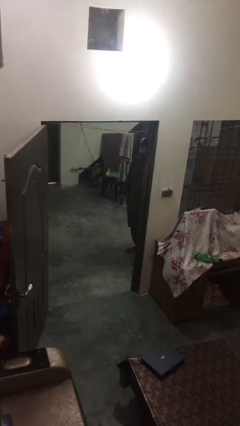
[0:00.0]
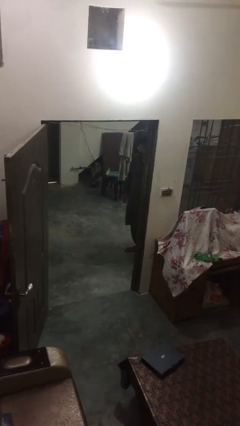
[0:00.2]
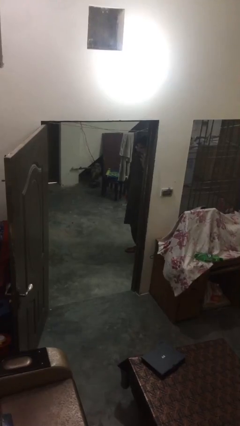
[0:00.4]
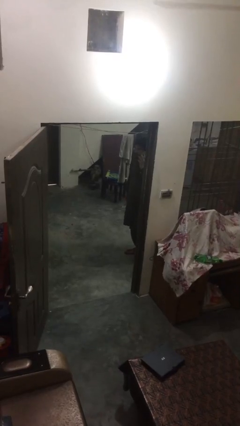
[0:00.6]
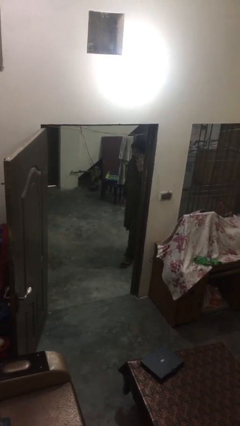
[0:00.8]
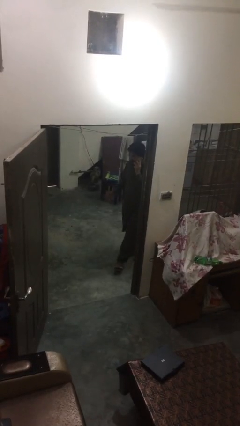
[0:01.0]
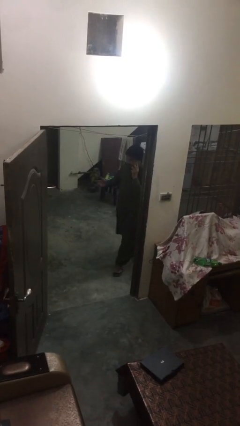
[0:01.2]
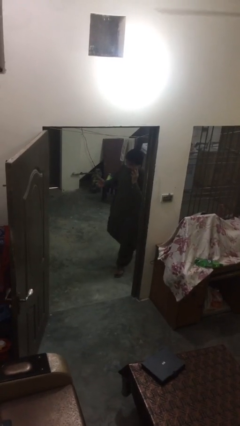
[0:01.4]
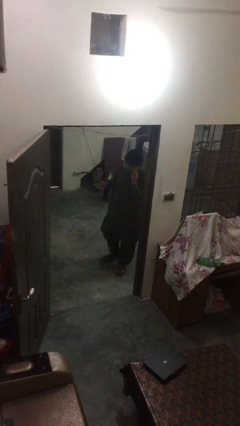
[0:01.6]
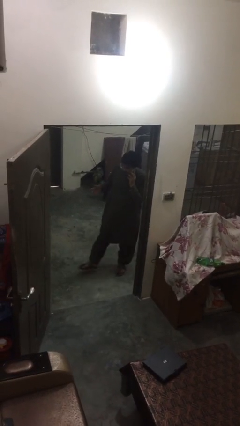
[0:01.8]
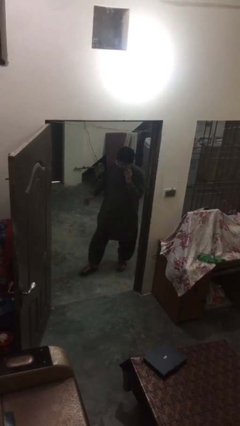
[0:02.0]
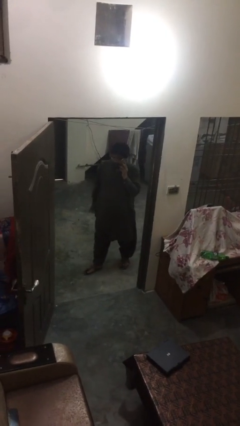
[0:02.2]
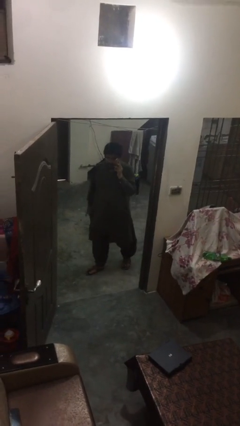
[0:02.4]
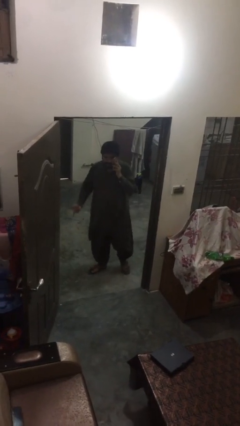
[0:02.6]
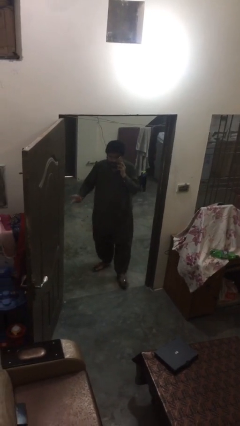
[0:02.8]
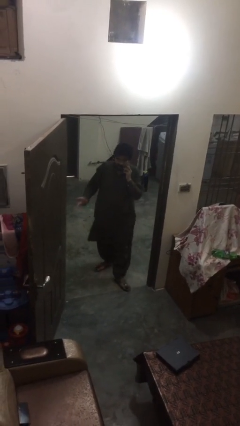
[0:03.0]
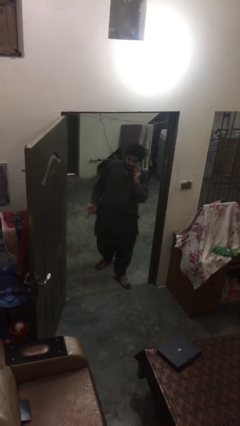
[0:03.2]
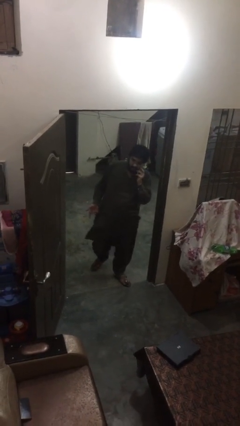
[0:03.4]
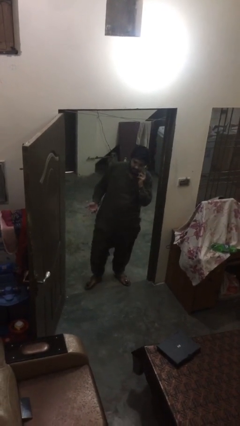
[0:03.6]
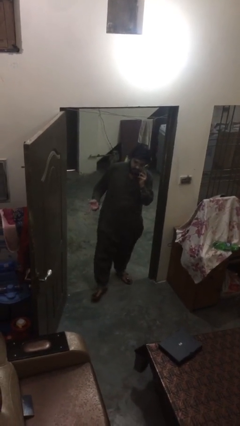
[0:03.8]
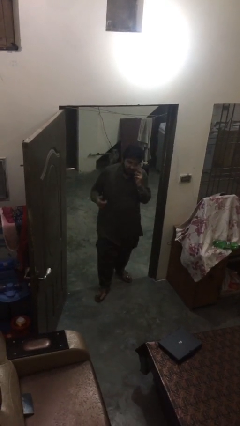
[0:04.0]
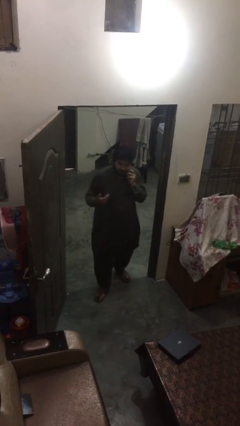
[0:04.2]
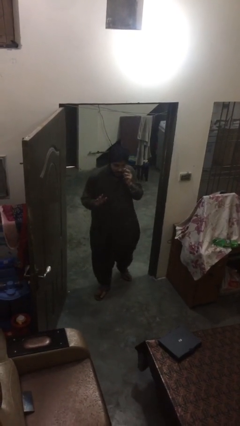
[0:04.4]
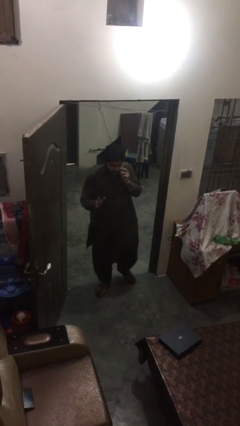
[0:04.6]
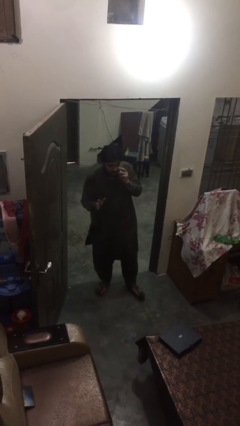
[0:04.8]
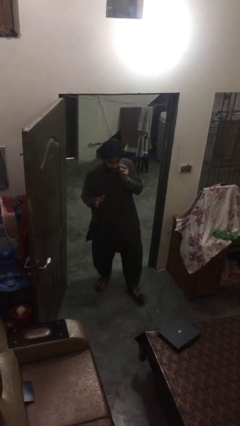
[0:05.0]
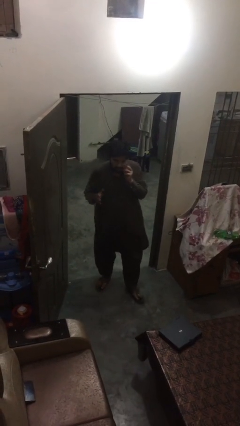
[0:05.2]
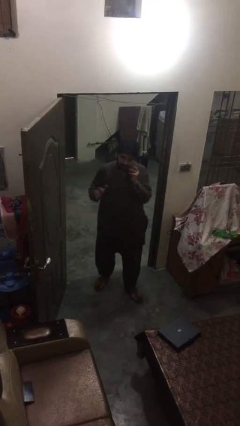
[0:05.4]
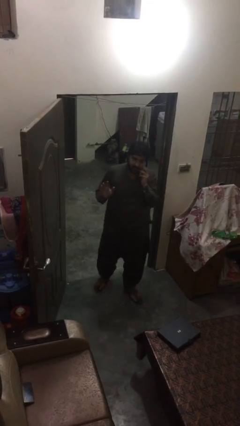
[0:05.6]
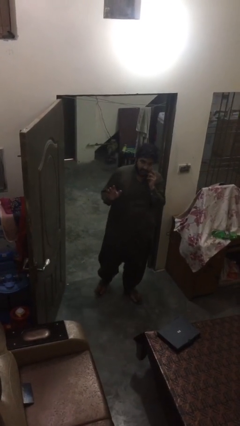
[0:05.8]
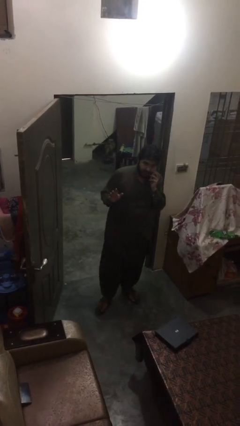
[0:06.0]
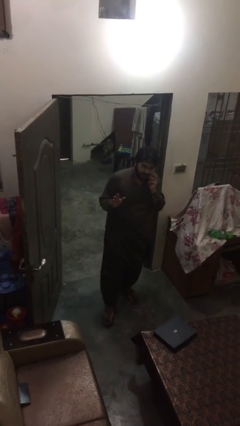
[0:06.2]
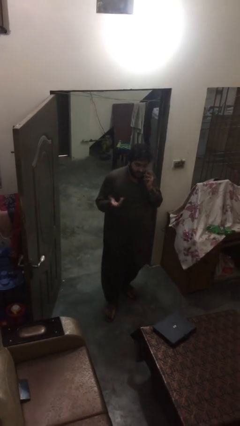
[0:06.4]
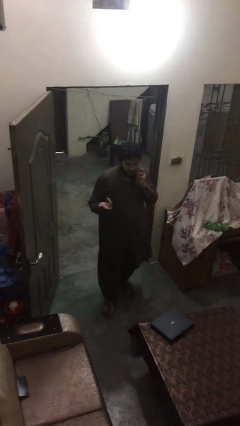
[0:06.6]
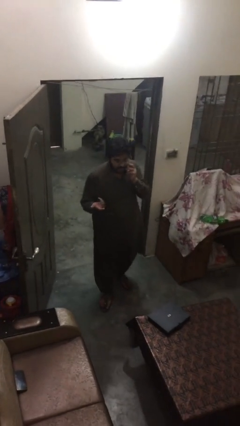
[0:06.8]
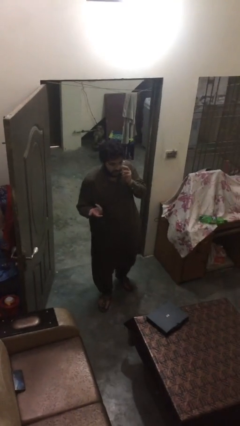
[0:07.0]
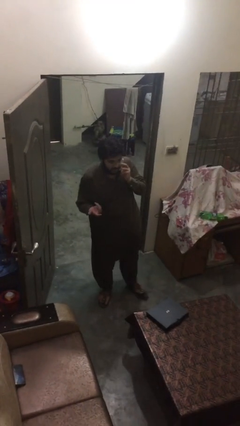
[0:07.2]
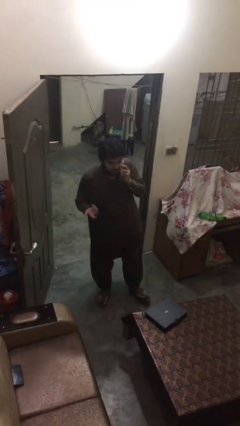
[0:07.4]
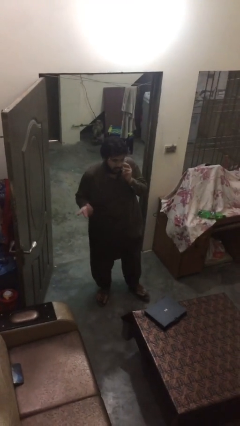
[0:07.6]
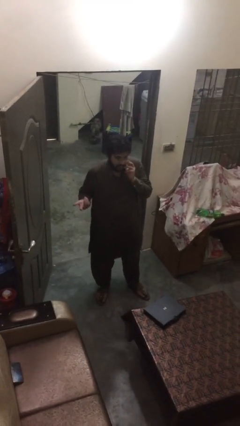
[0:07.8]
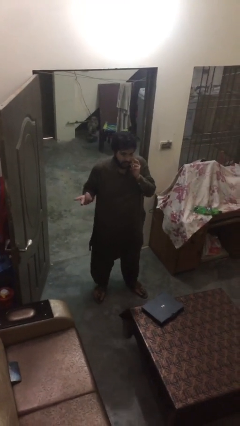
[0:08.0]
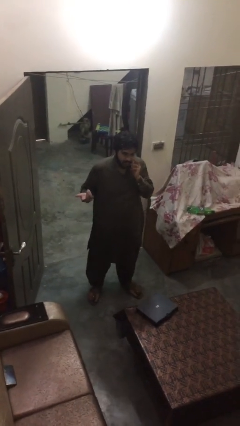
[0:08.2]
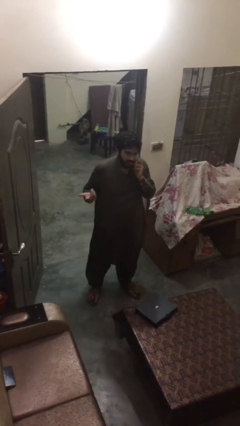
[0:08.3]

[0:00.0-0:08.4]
person enters scene through structure

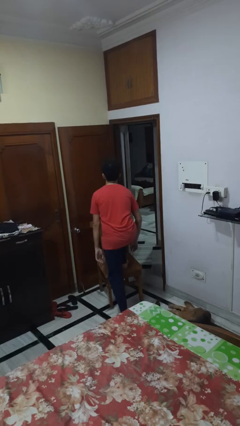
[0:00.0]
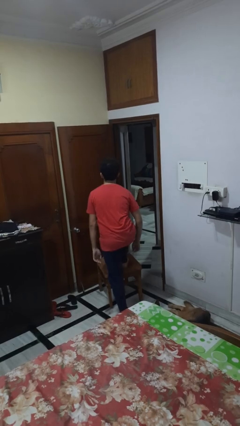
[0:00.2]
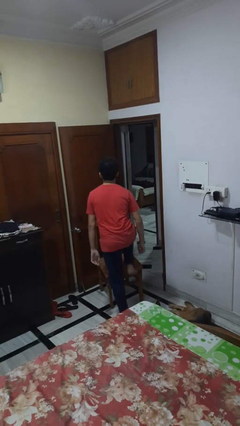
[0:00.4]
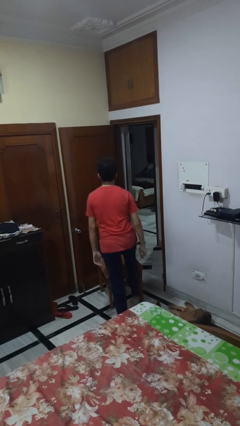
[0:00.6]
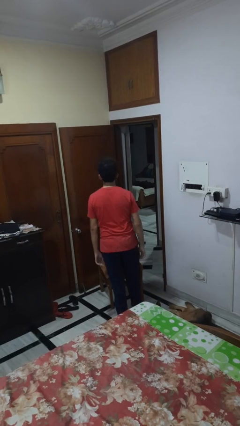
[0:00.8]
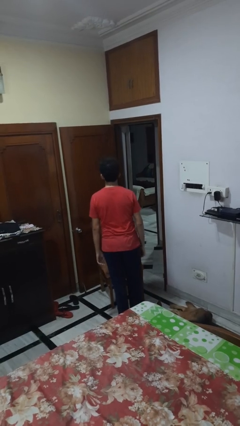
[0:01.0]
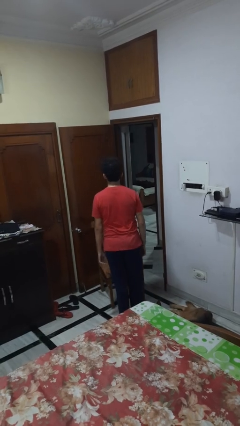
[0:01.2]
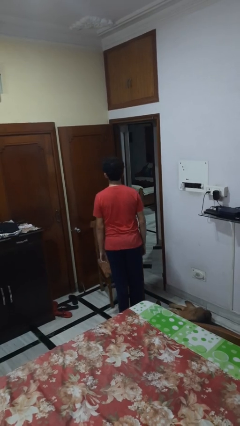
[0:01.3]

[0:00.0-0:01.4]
person climbs off chair

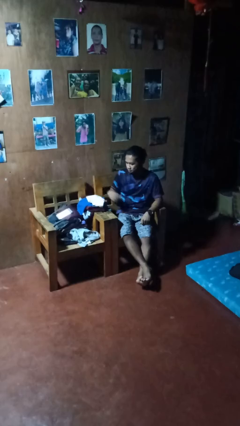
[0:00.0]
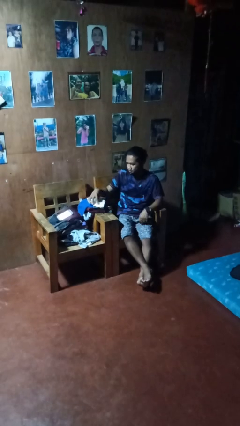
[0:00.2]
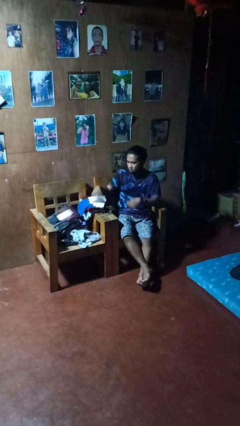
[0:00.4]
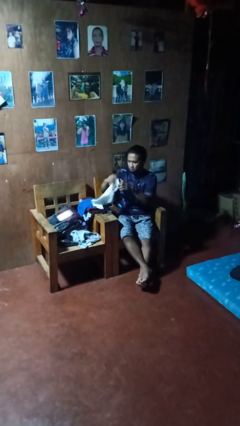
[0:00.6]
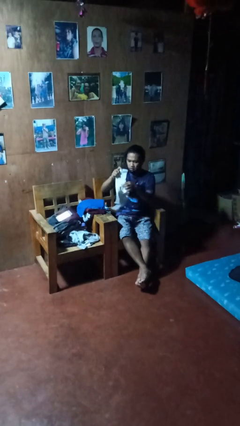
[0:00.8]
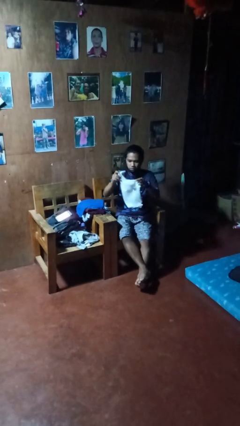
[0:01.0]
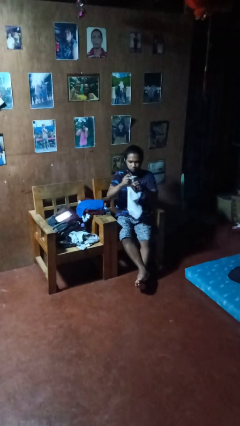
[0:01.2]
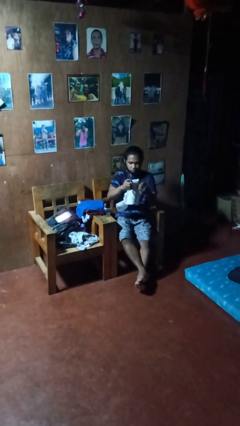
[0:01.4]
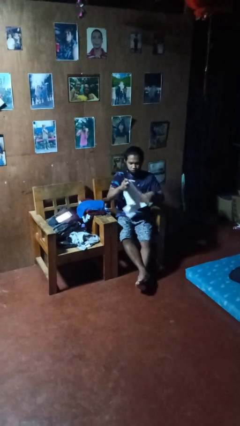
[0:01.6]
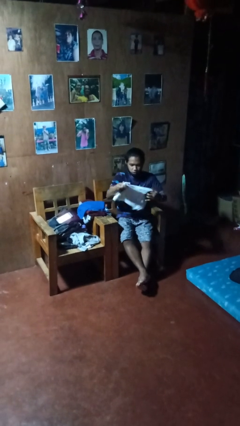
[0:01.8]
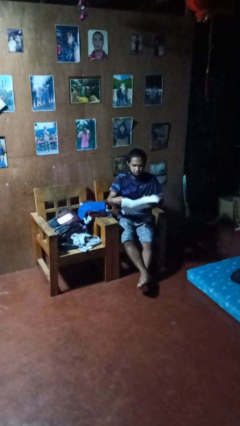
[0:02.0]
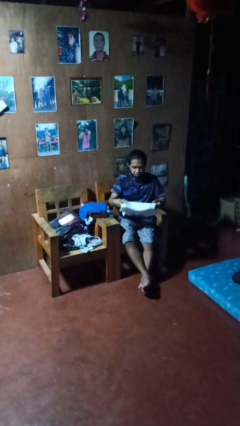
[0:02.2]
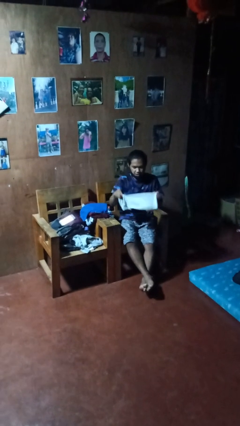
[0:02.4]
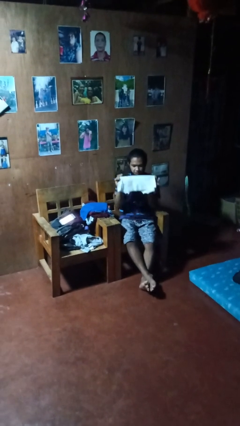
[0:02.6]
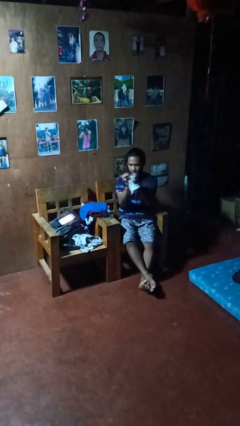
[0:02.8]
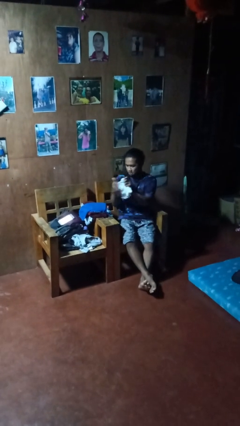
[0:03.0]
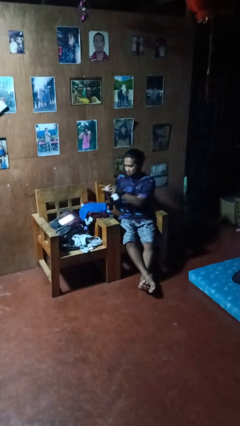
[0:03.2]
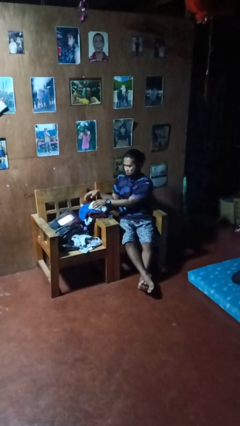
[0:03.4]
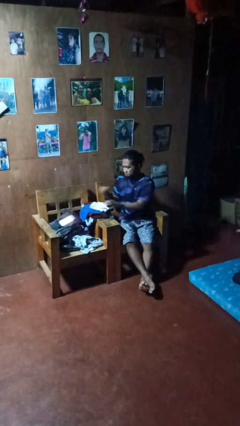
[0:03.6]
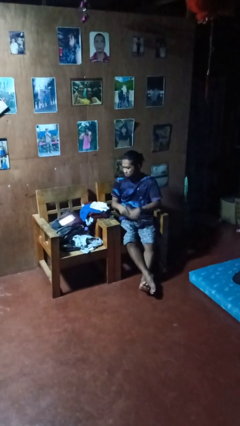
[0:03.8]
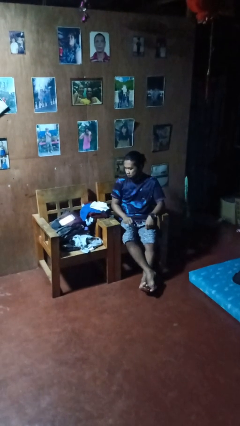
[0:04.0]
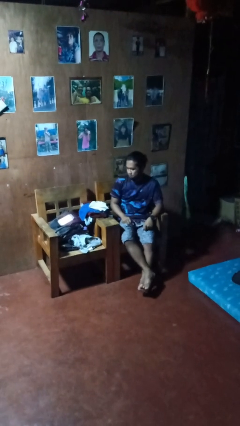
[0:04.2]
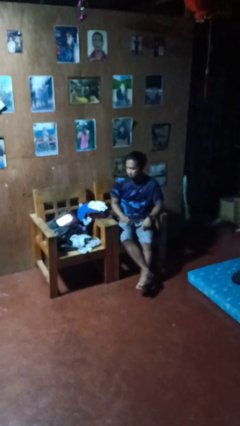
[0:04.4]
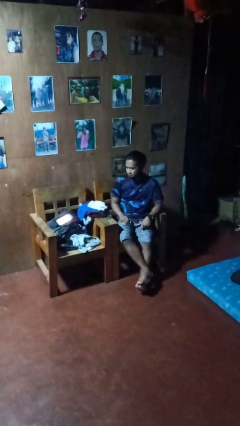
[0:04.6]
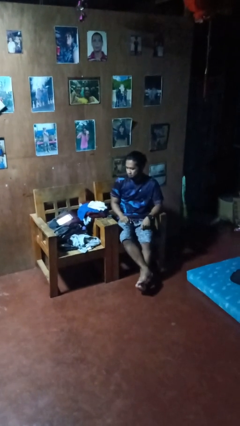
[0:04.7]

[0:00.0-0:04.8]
person folds shirt

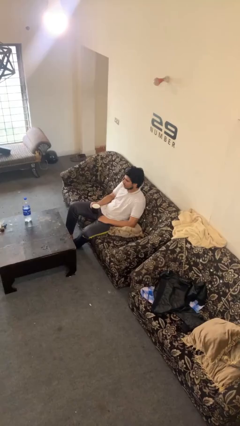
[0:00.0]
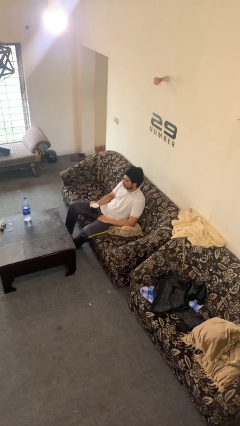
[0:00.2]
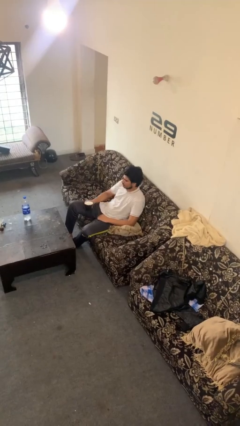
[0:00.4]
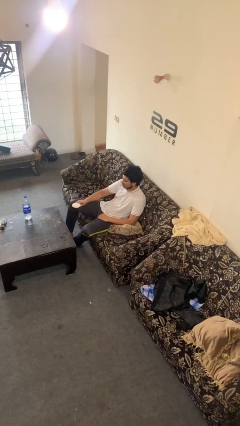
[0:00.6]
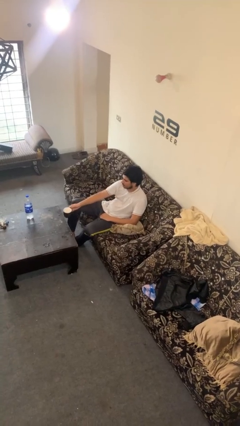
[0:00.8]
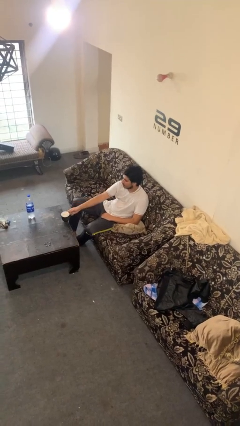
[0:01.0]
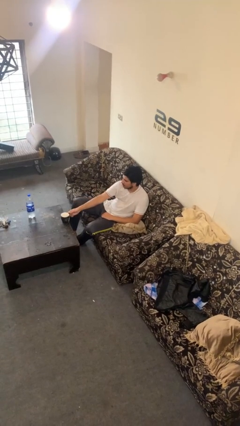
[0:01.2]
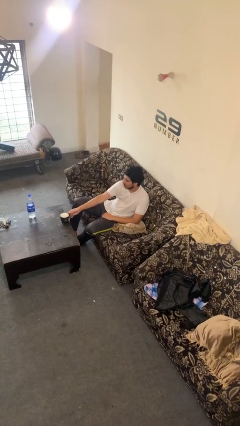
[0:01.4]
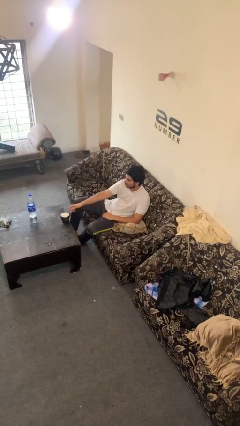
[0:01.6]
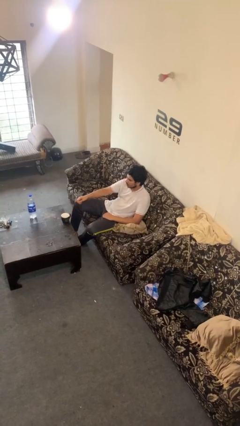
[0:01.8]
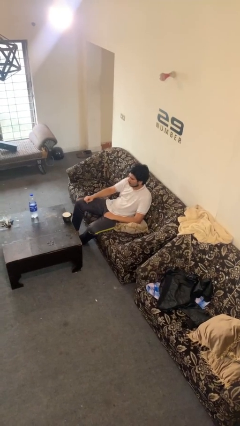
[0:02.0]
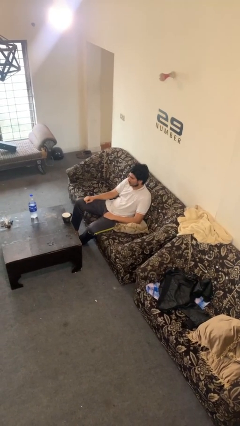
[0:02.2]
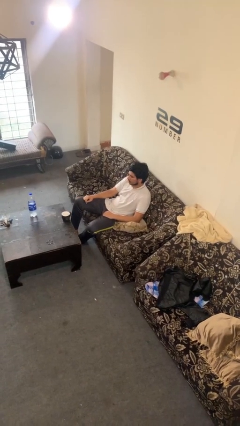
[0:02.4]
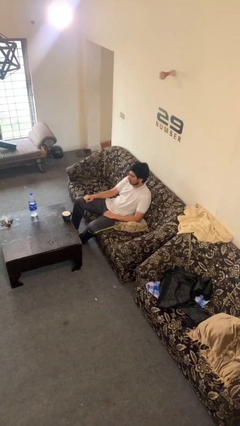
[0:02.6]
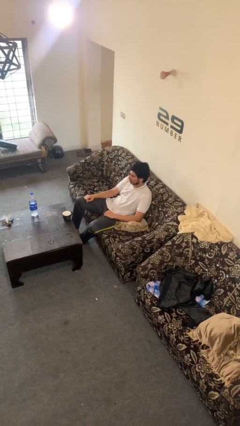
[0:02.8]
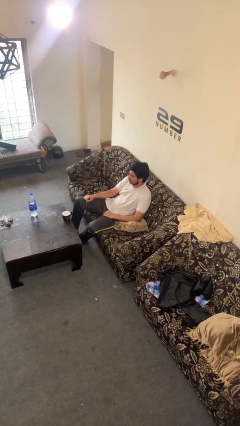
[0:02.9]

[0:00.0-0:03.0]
person puts down object on table

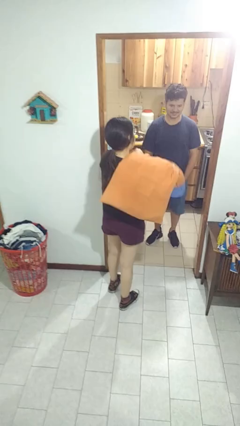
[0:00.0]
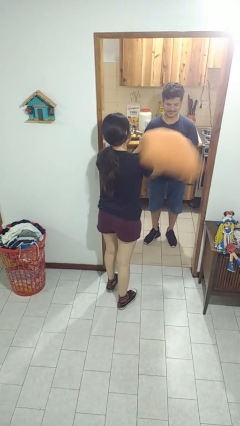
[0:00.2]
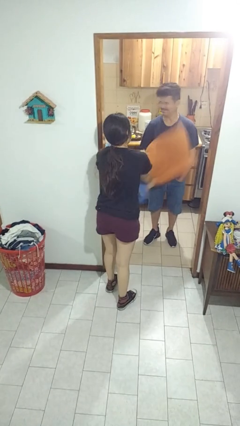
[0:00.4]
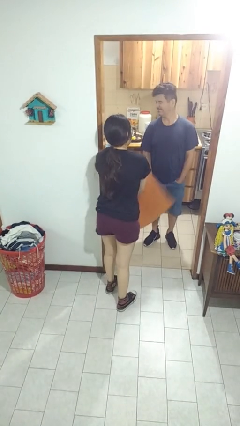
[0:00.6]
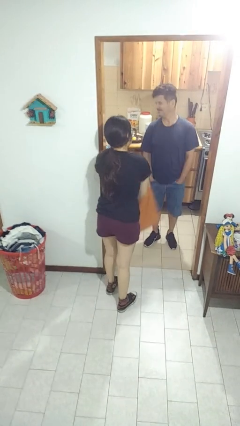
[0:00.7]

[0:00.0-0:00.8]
person hits person with pillow
